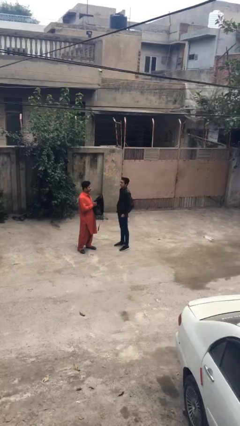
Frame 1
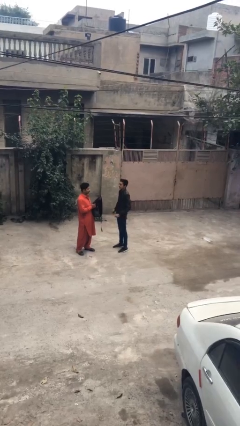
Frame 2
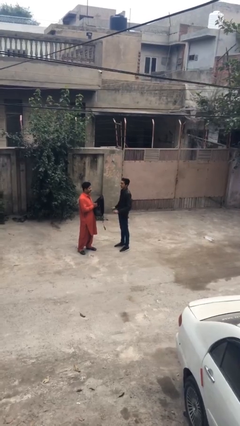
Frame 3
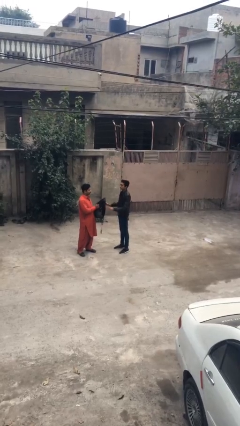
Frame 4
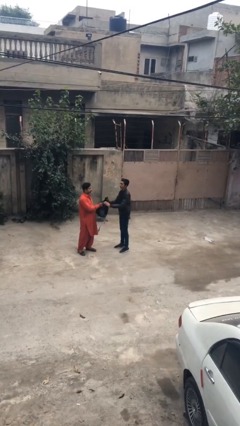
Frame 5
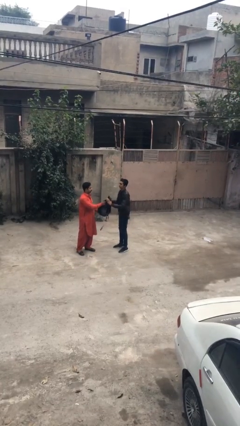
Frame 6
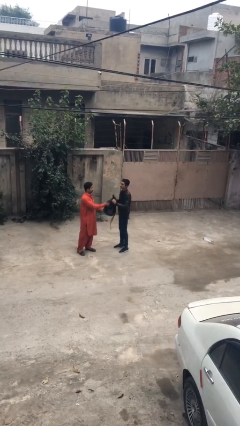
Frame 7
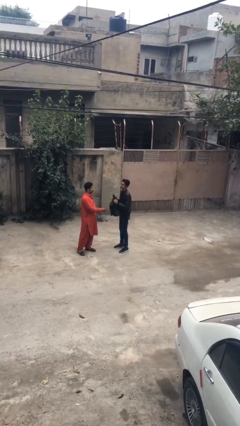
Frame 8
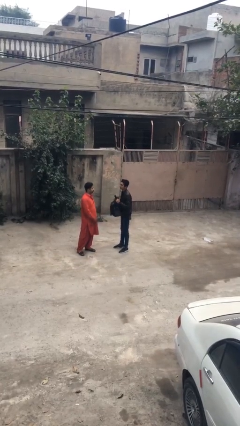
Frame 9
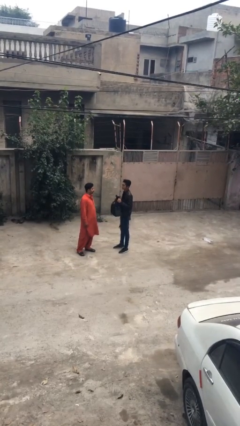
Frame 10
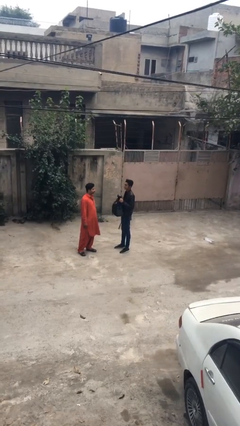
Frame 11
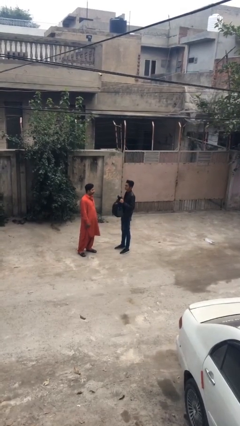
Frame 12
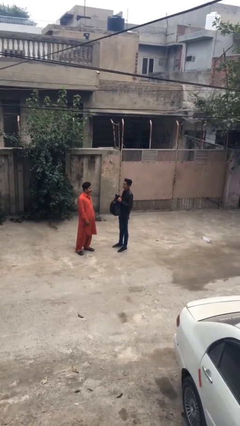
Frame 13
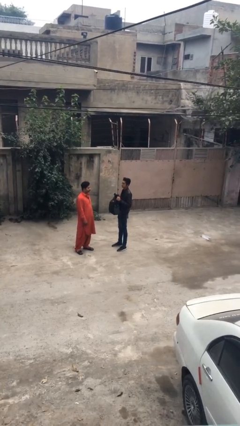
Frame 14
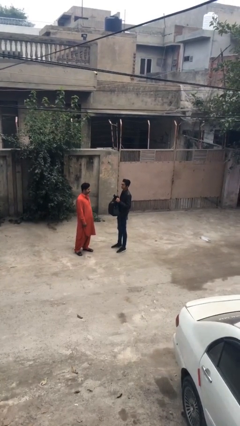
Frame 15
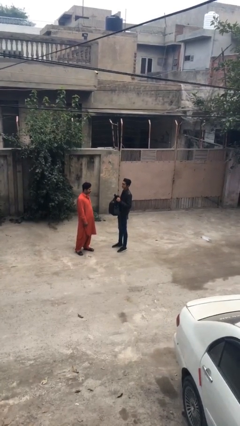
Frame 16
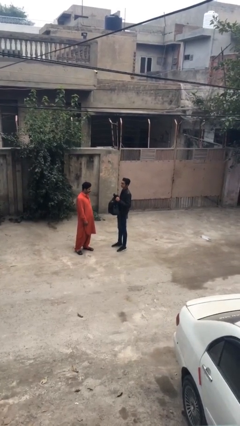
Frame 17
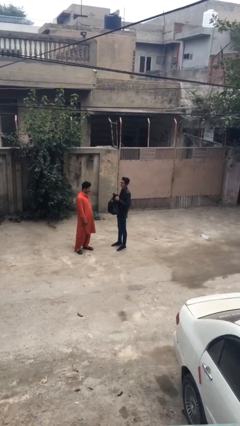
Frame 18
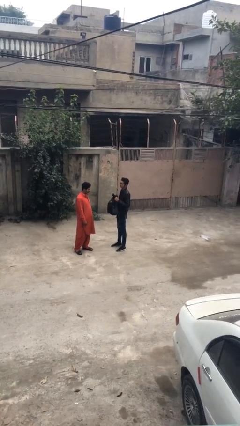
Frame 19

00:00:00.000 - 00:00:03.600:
person transfers object to person

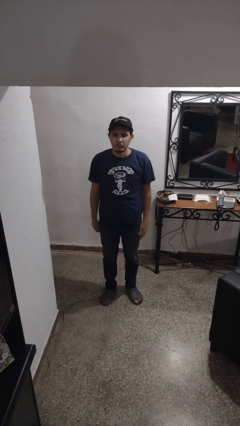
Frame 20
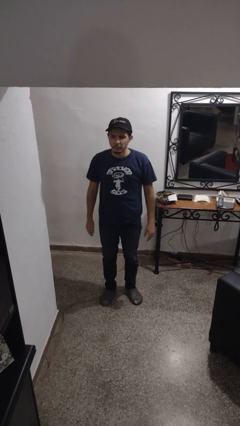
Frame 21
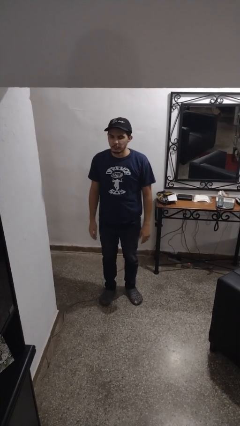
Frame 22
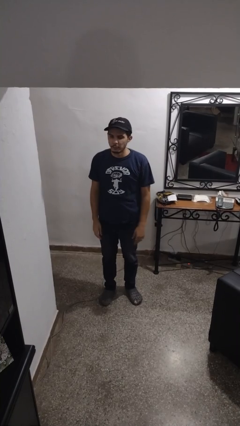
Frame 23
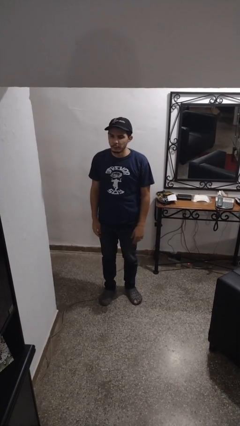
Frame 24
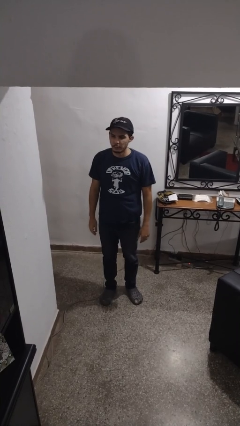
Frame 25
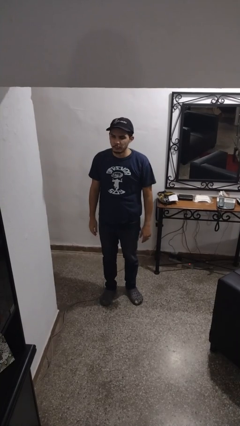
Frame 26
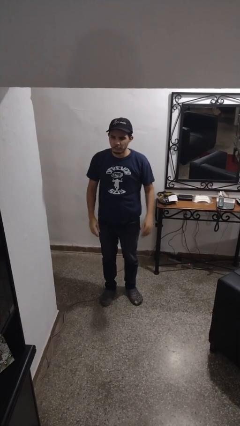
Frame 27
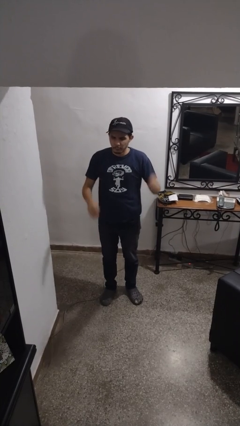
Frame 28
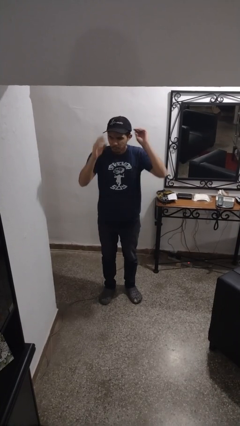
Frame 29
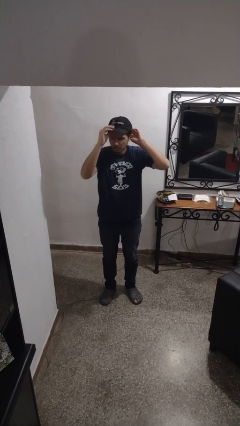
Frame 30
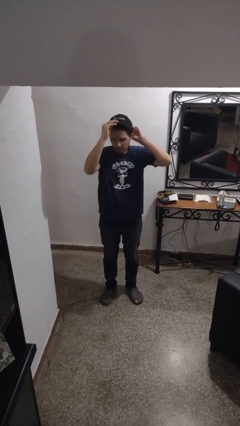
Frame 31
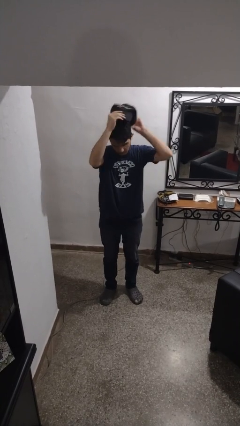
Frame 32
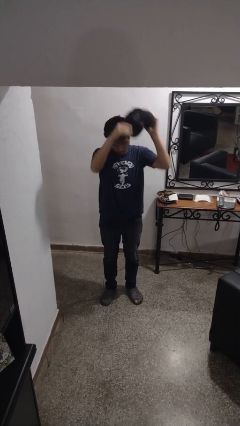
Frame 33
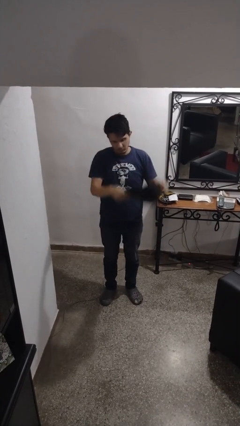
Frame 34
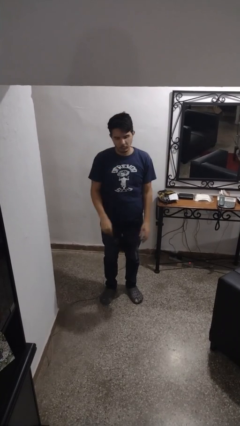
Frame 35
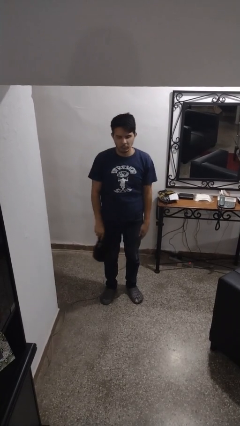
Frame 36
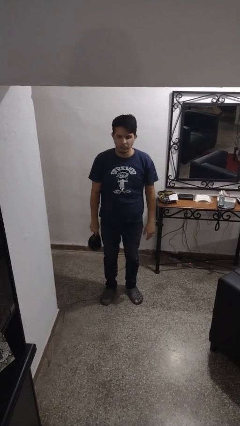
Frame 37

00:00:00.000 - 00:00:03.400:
person takes off hat

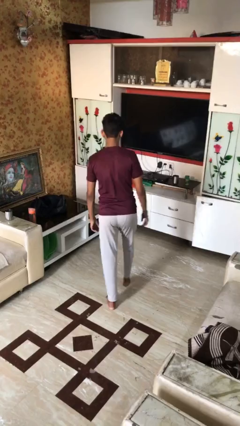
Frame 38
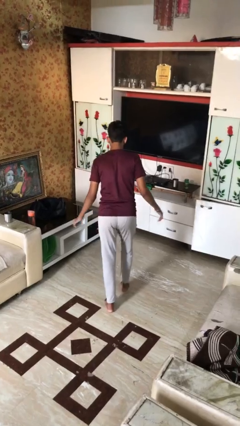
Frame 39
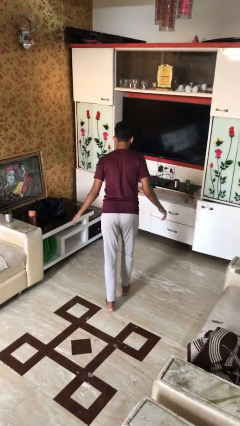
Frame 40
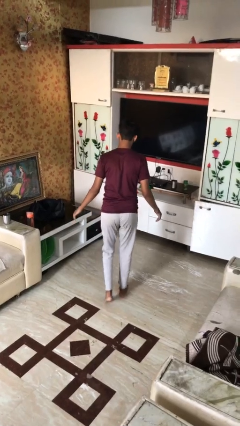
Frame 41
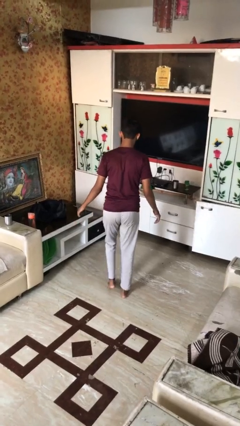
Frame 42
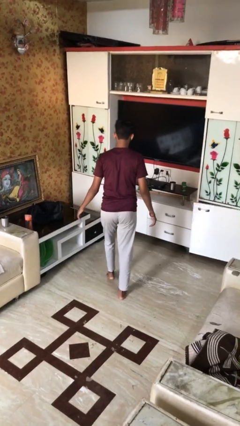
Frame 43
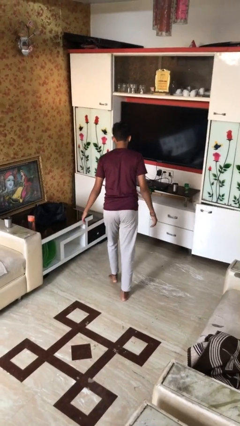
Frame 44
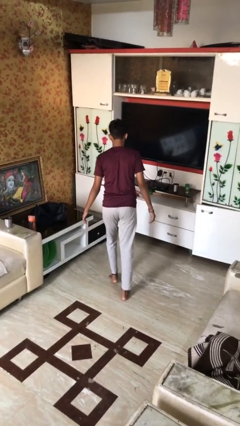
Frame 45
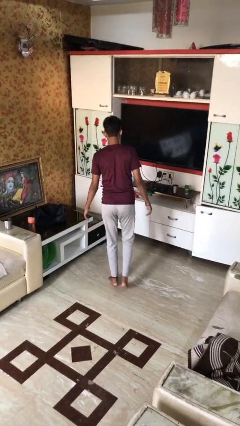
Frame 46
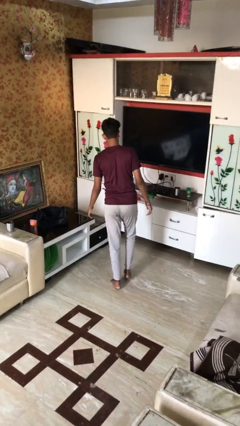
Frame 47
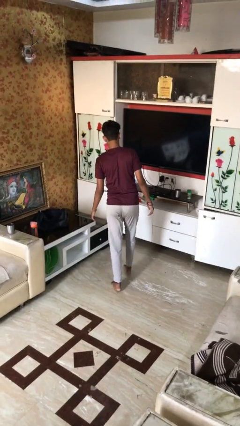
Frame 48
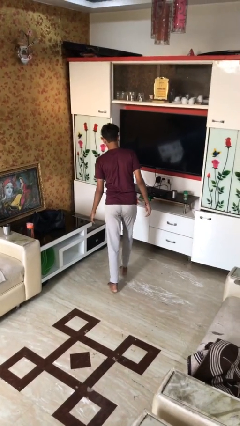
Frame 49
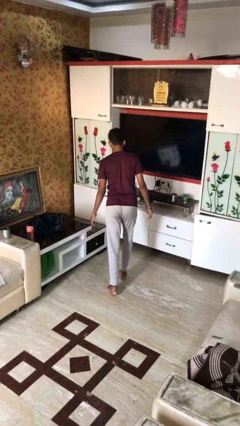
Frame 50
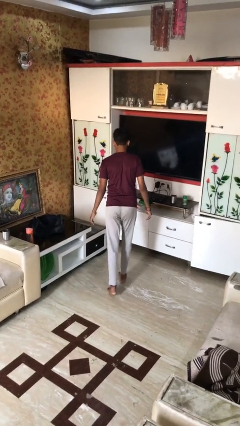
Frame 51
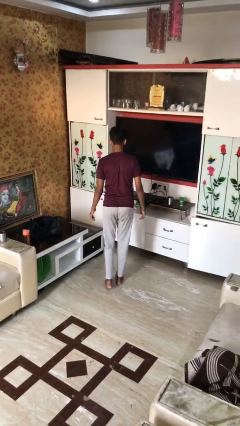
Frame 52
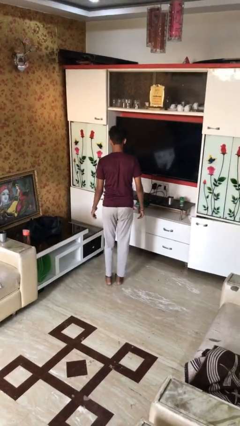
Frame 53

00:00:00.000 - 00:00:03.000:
person walks tiptoe

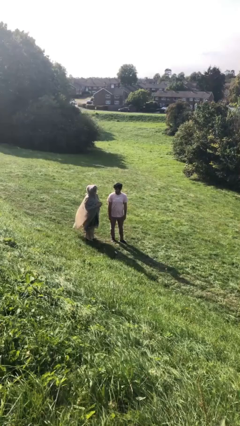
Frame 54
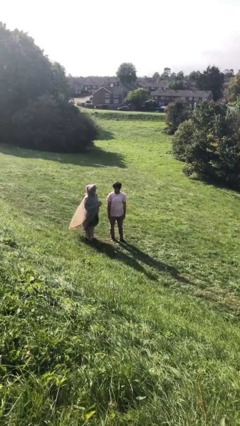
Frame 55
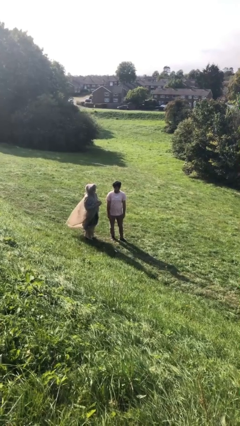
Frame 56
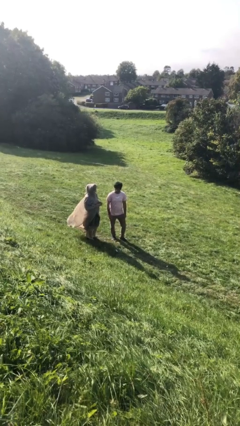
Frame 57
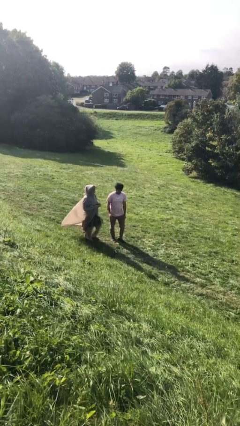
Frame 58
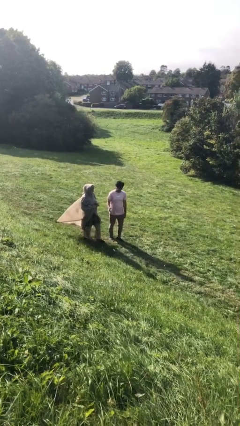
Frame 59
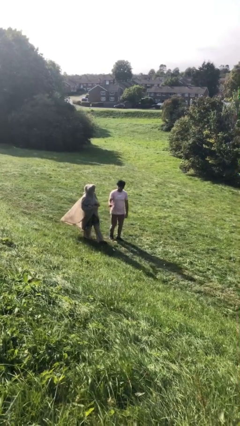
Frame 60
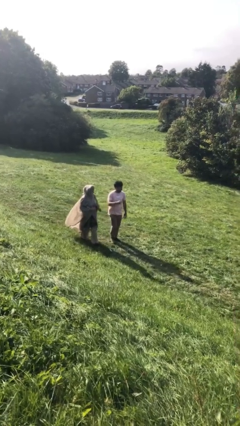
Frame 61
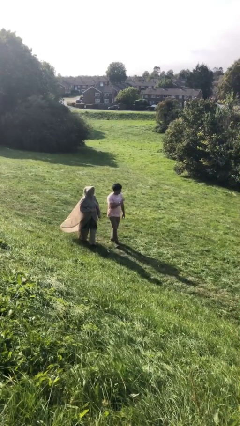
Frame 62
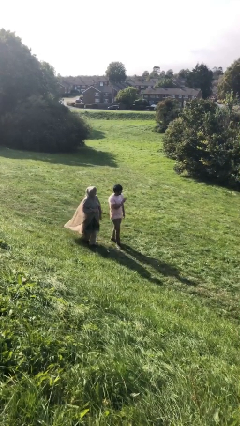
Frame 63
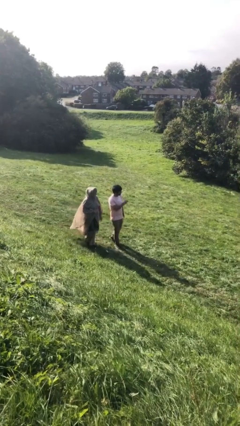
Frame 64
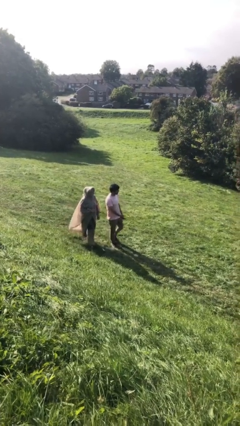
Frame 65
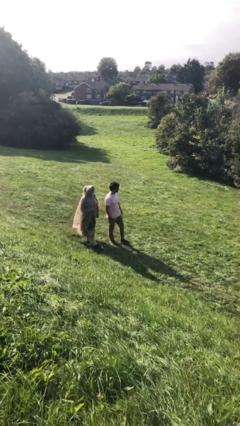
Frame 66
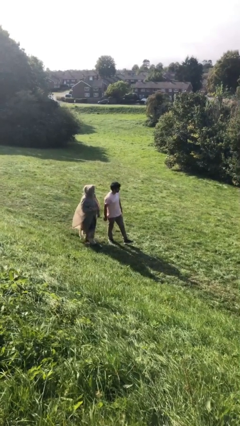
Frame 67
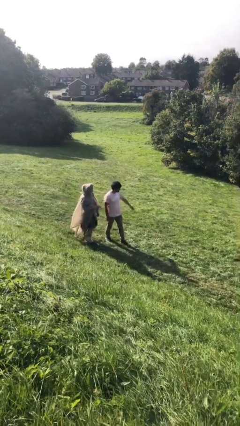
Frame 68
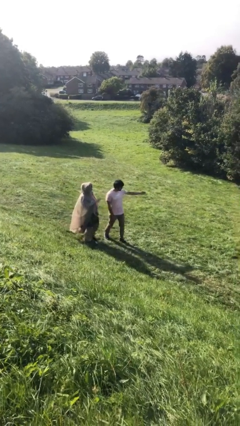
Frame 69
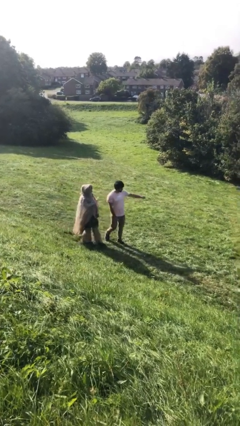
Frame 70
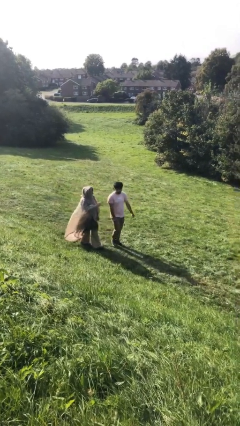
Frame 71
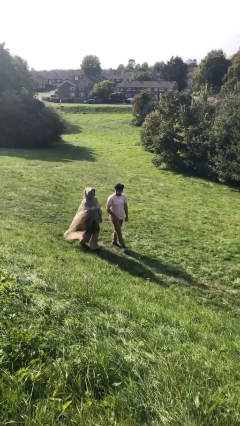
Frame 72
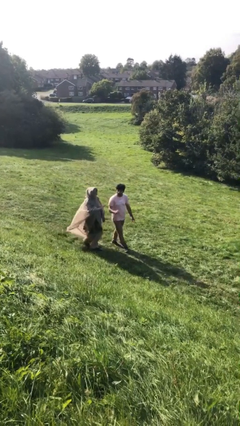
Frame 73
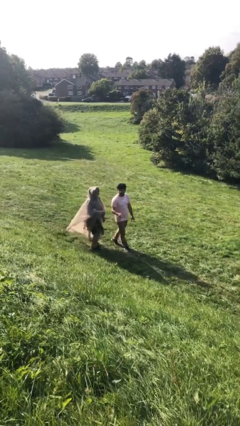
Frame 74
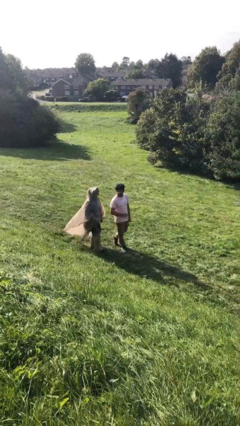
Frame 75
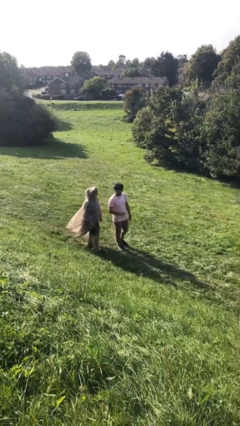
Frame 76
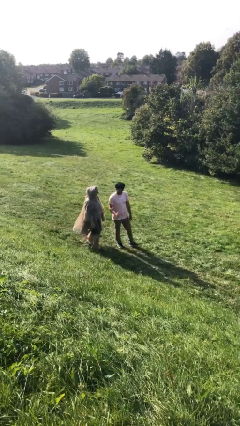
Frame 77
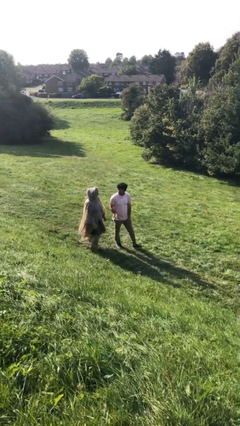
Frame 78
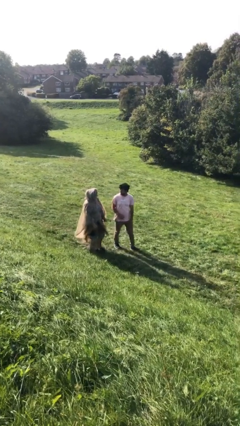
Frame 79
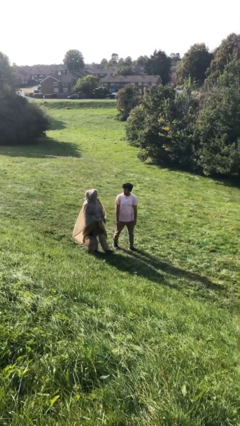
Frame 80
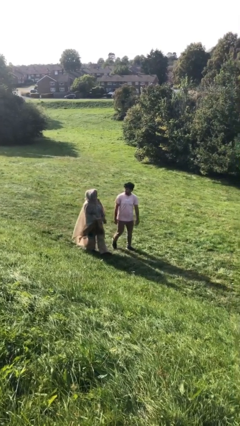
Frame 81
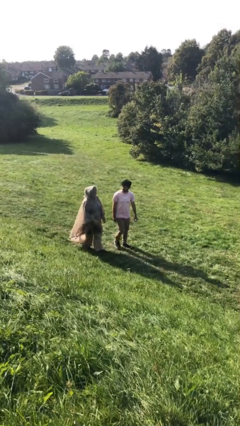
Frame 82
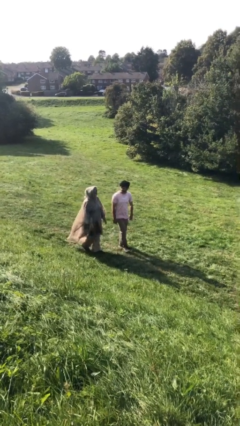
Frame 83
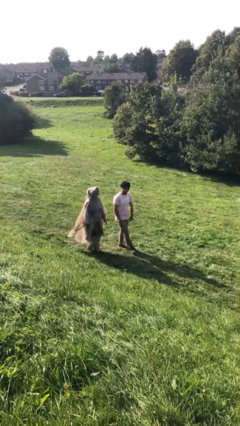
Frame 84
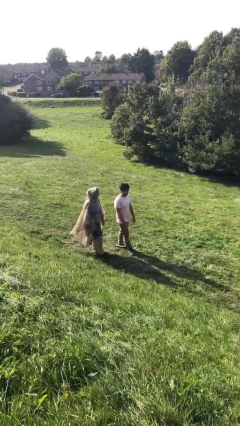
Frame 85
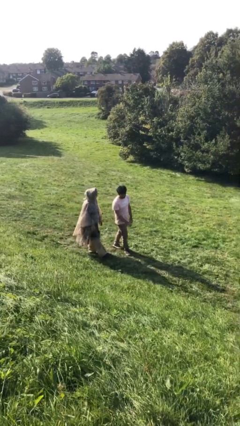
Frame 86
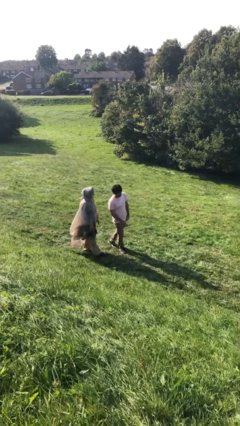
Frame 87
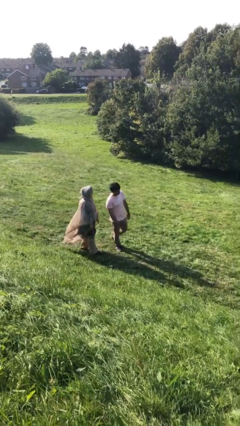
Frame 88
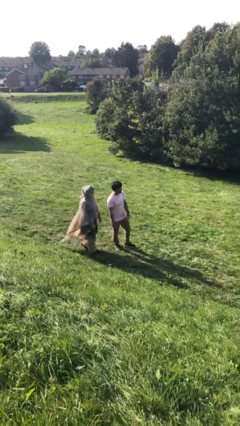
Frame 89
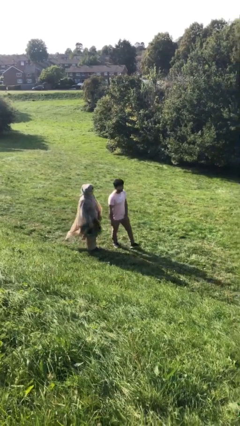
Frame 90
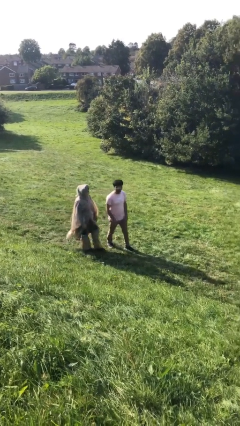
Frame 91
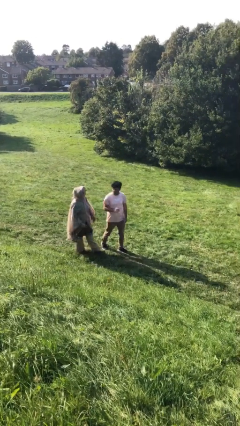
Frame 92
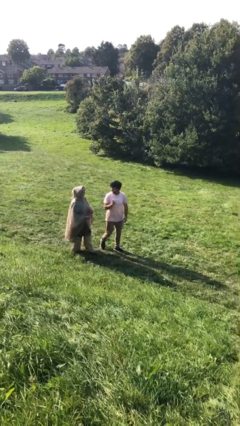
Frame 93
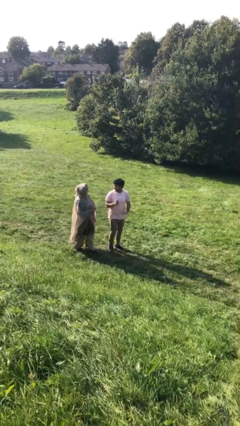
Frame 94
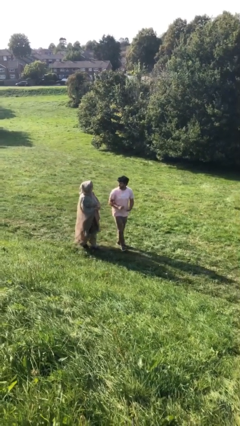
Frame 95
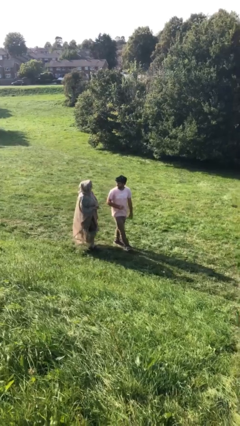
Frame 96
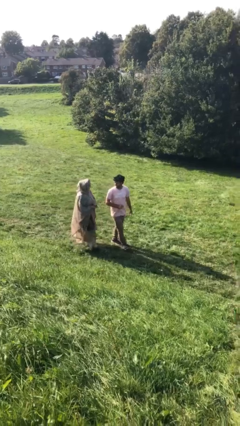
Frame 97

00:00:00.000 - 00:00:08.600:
person talks to person
